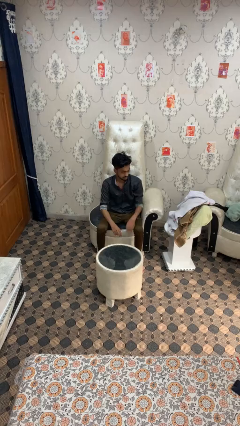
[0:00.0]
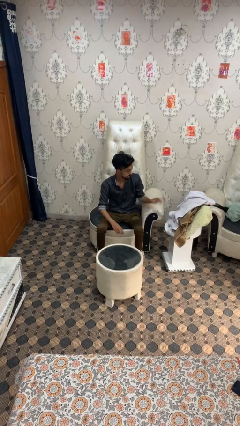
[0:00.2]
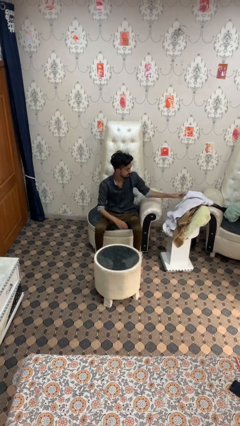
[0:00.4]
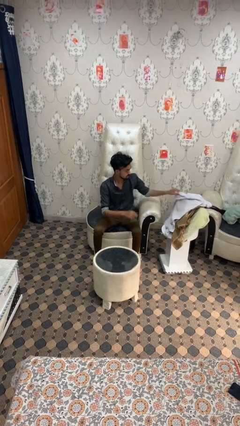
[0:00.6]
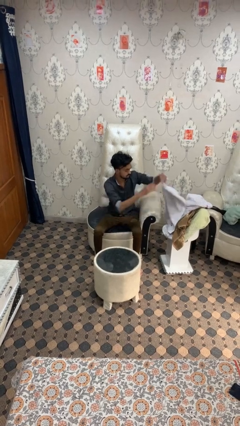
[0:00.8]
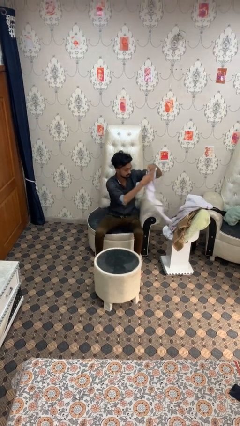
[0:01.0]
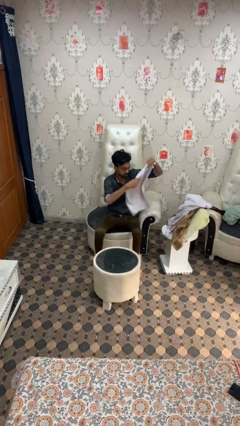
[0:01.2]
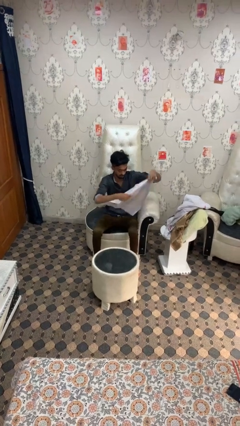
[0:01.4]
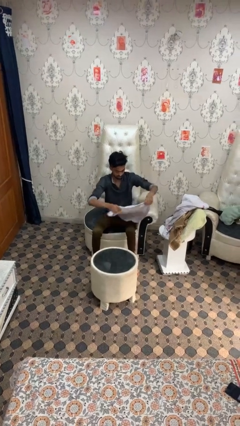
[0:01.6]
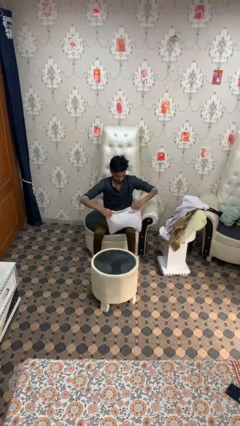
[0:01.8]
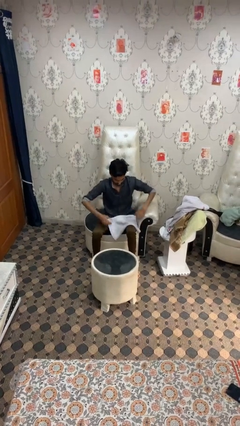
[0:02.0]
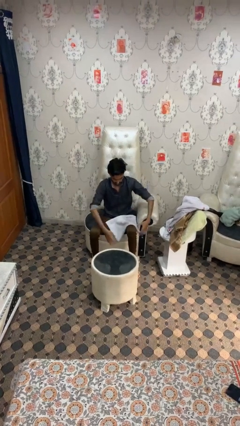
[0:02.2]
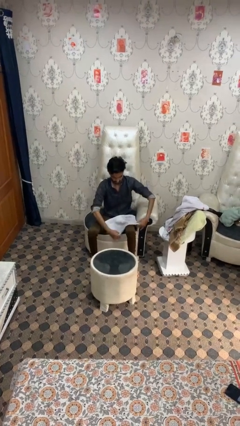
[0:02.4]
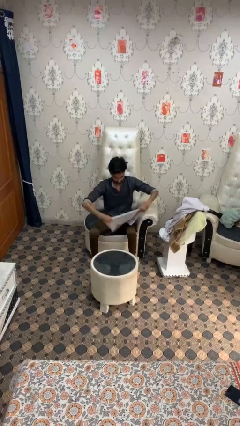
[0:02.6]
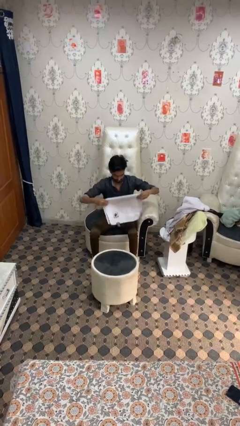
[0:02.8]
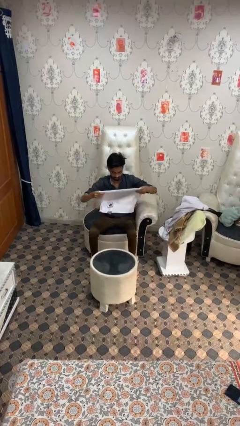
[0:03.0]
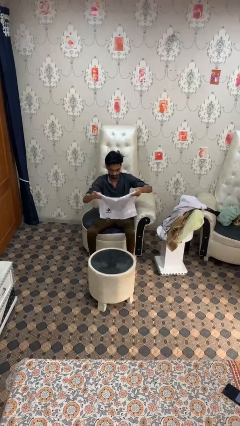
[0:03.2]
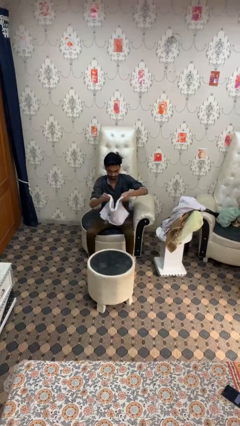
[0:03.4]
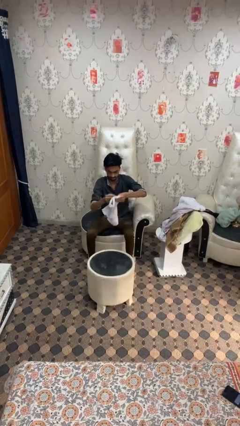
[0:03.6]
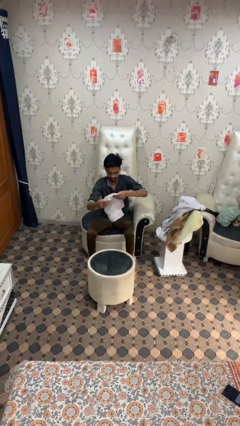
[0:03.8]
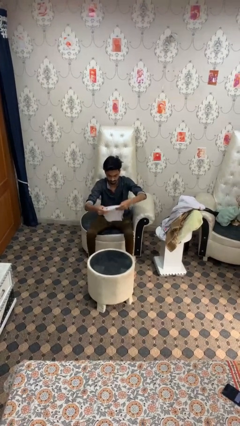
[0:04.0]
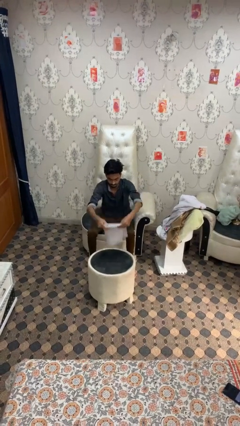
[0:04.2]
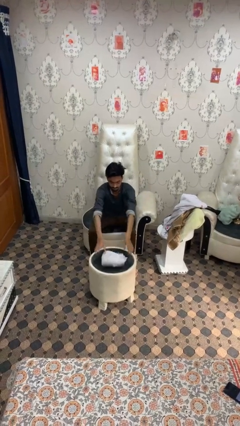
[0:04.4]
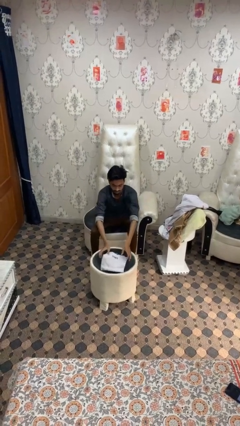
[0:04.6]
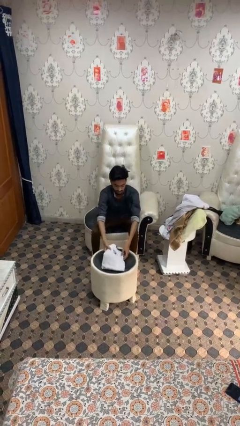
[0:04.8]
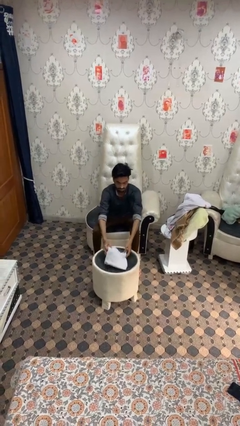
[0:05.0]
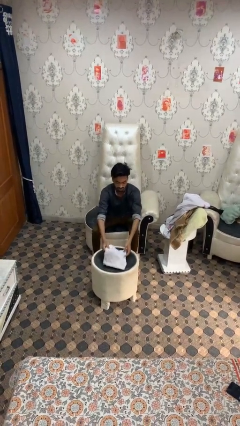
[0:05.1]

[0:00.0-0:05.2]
person folds towel

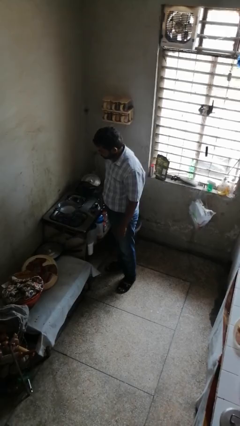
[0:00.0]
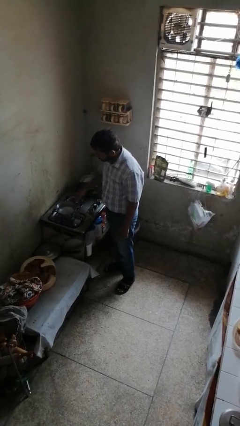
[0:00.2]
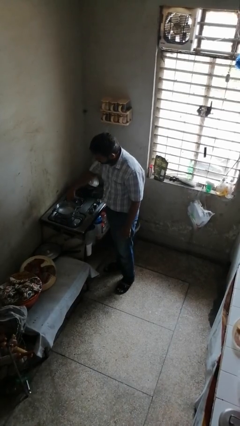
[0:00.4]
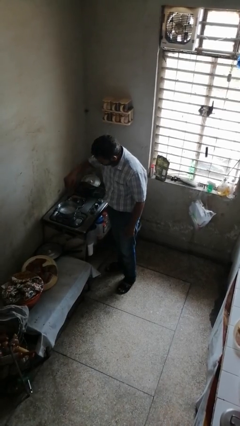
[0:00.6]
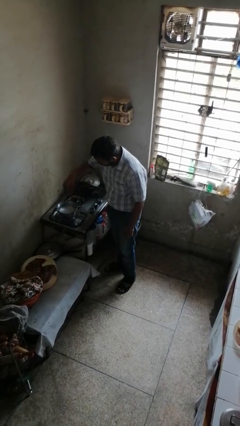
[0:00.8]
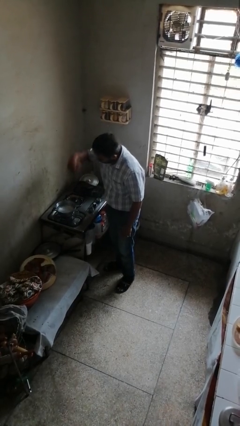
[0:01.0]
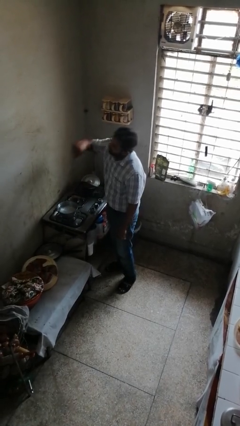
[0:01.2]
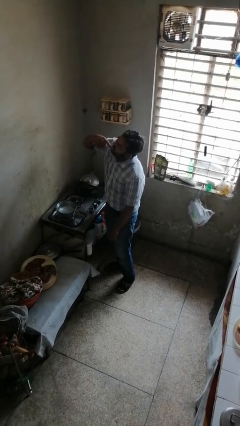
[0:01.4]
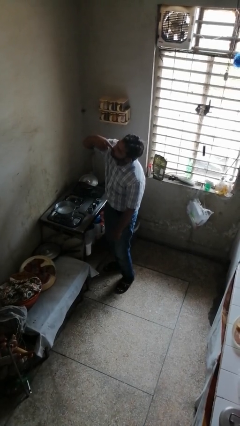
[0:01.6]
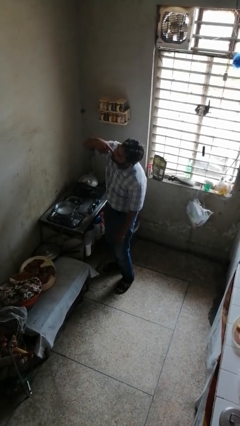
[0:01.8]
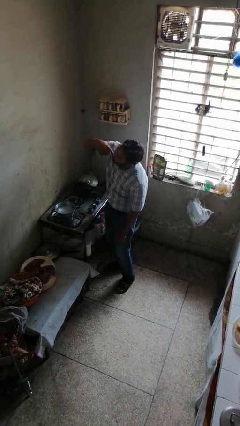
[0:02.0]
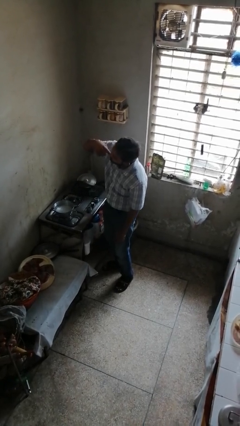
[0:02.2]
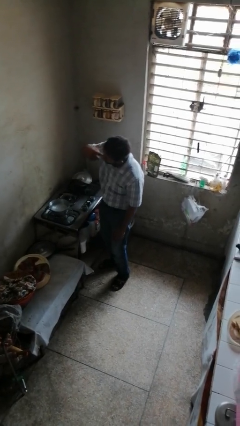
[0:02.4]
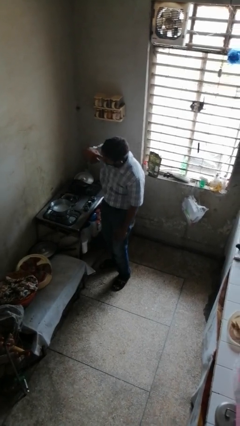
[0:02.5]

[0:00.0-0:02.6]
person burns hand

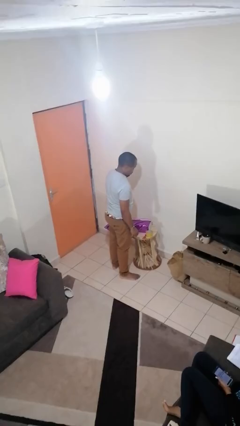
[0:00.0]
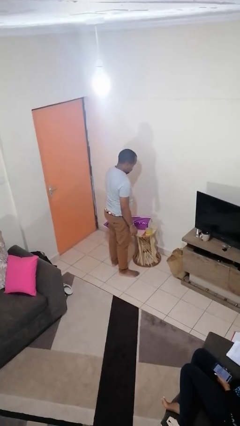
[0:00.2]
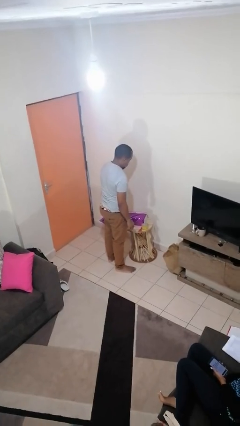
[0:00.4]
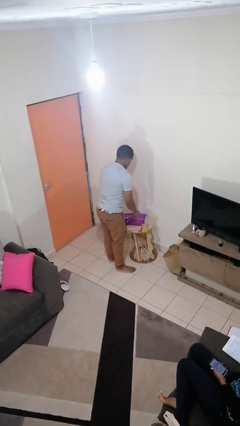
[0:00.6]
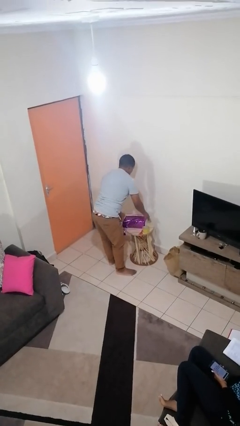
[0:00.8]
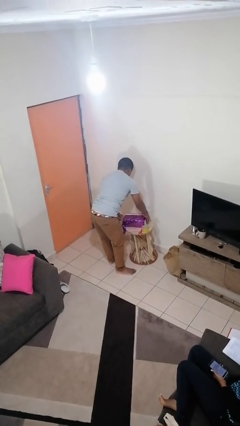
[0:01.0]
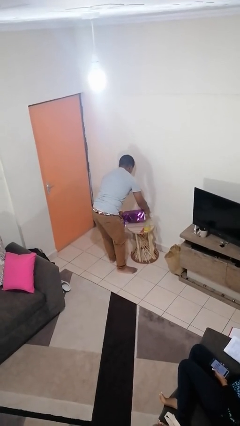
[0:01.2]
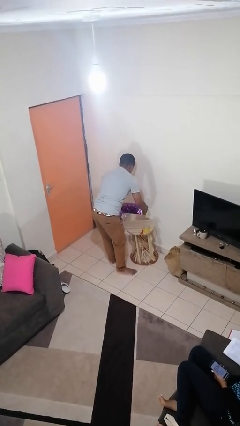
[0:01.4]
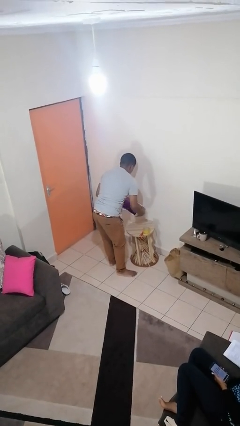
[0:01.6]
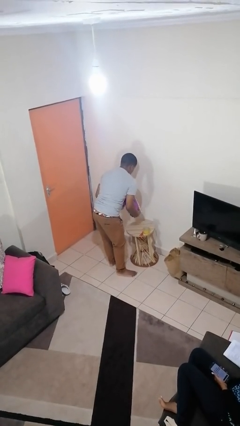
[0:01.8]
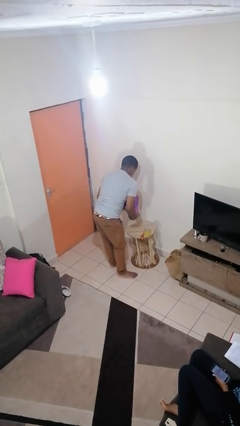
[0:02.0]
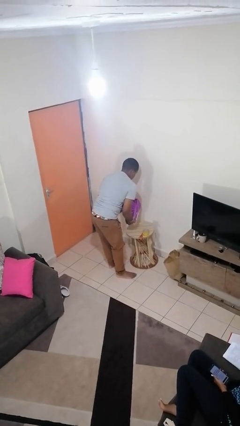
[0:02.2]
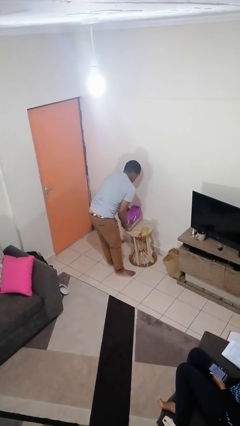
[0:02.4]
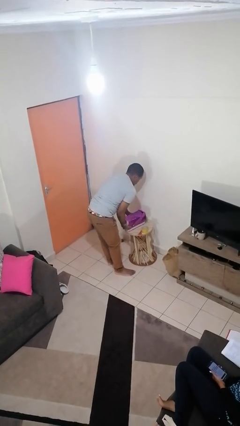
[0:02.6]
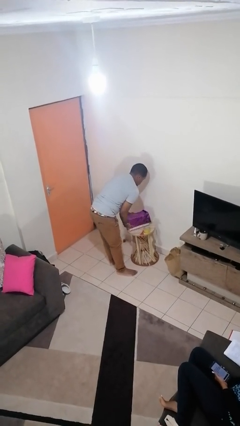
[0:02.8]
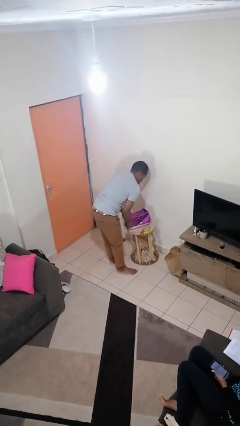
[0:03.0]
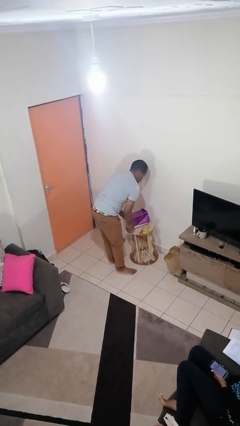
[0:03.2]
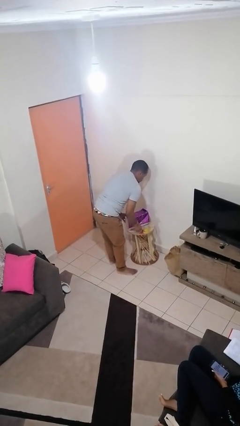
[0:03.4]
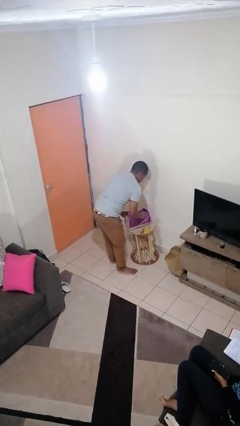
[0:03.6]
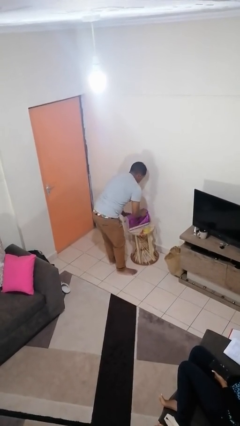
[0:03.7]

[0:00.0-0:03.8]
person wraps box

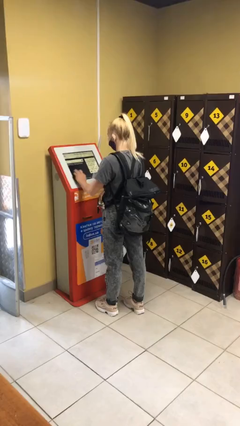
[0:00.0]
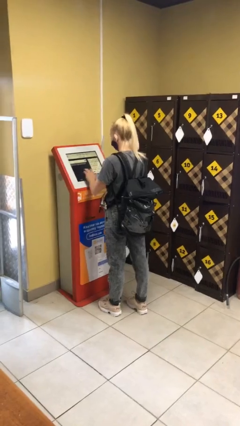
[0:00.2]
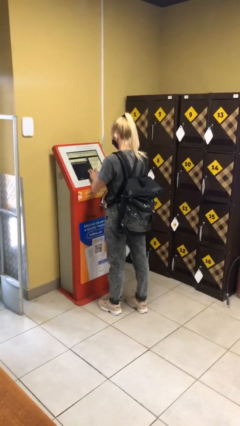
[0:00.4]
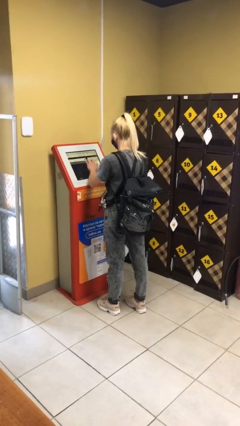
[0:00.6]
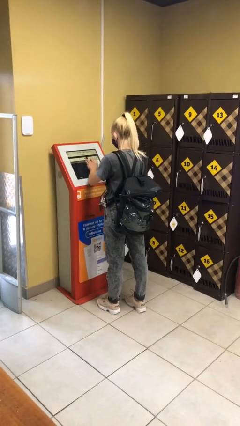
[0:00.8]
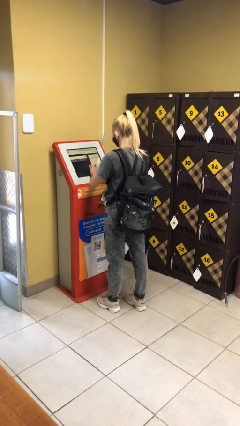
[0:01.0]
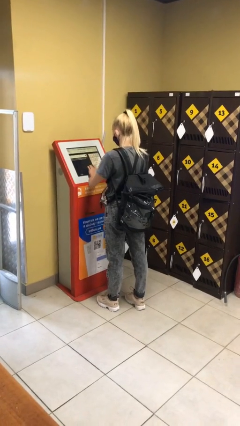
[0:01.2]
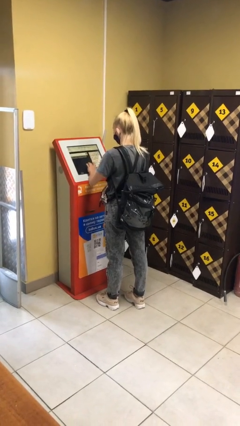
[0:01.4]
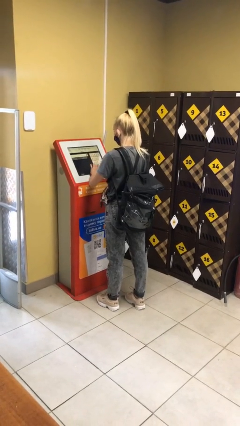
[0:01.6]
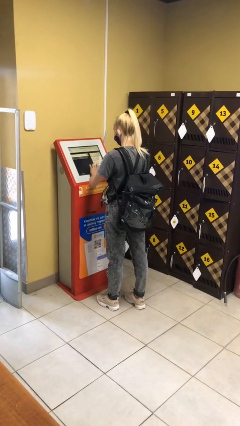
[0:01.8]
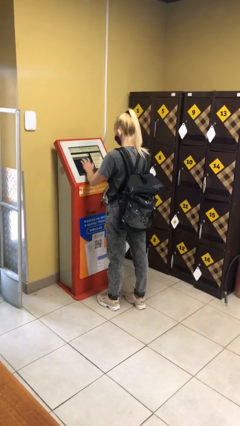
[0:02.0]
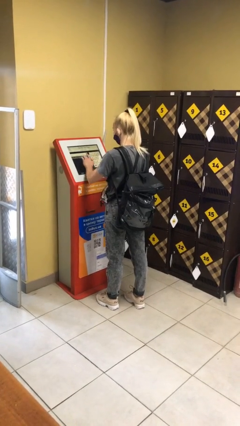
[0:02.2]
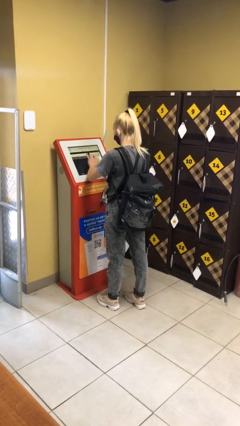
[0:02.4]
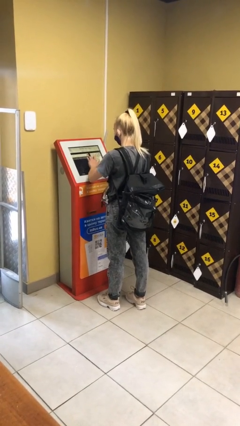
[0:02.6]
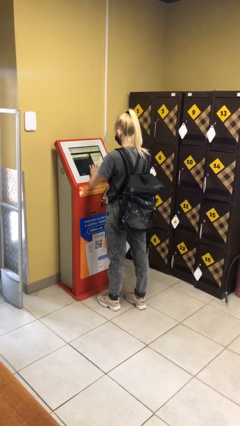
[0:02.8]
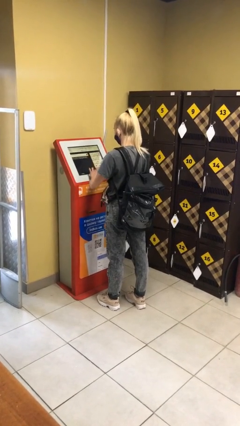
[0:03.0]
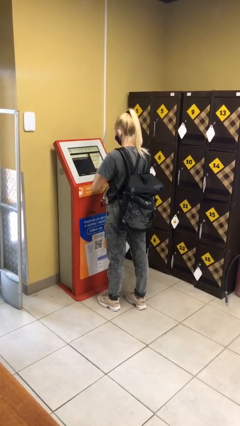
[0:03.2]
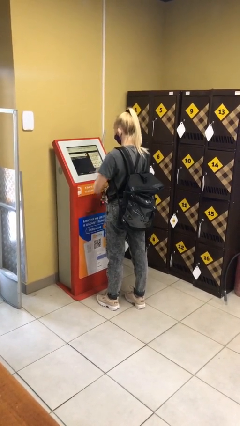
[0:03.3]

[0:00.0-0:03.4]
person purchases from machine

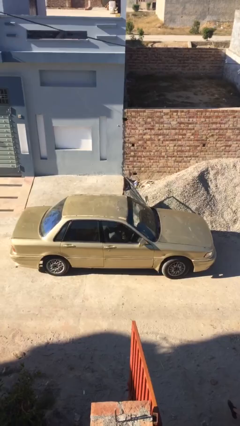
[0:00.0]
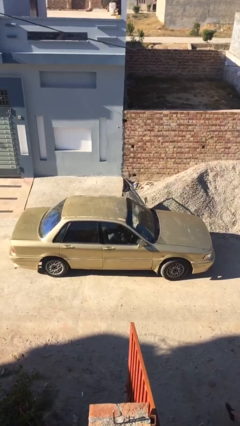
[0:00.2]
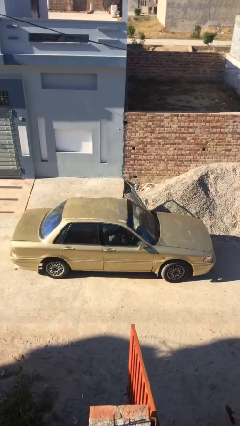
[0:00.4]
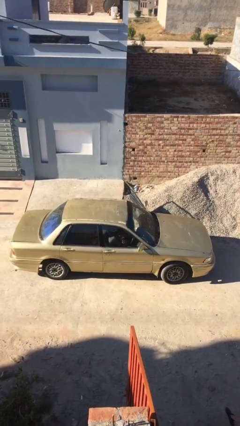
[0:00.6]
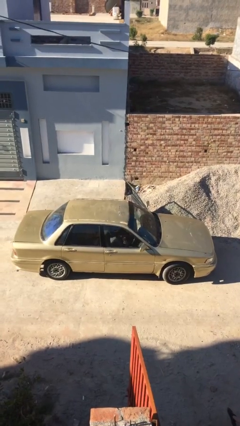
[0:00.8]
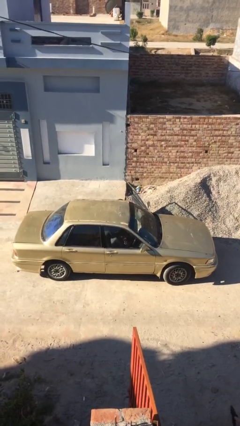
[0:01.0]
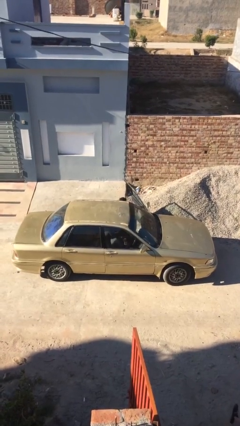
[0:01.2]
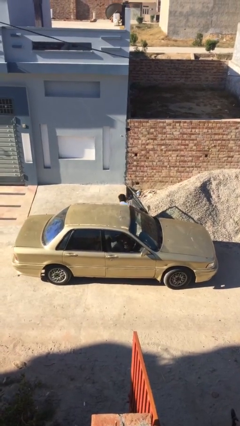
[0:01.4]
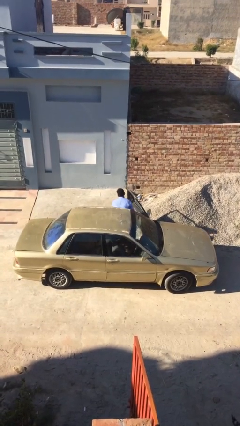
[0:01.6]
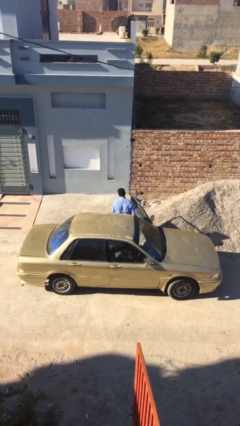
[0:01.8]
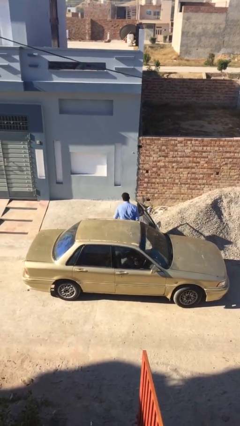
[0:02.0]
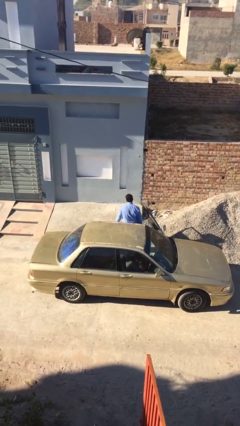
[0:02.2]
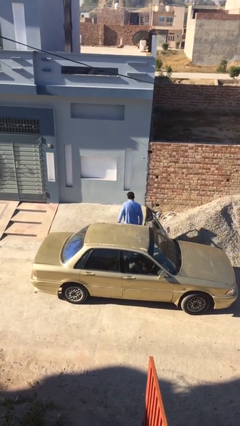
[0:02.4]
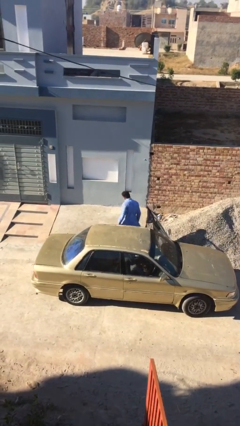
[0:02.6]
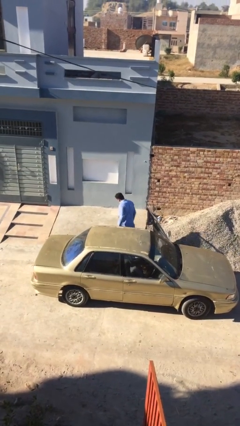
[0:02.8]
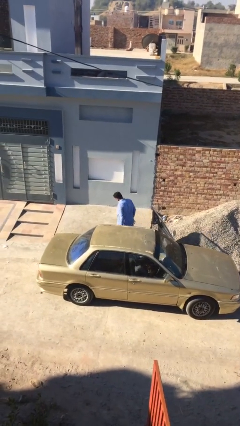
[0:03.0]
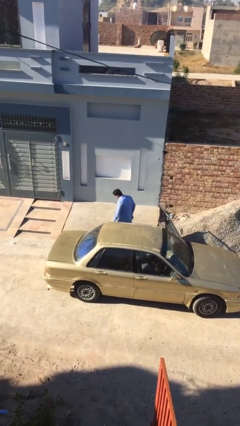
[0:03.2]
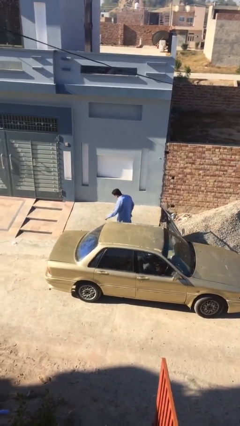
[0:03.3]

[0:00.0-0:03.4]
person exits car
